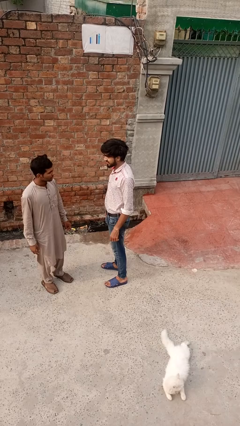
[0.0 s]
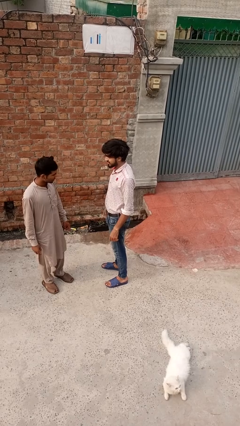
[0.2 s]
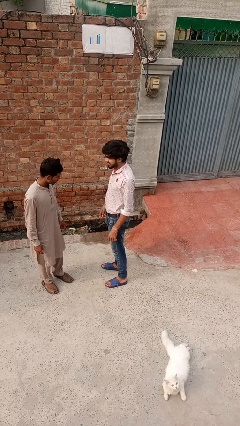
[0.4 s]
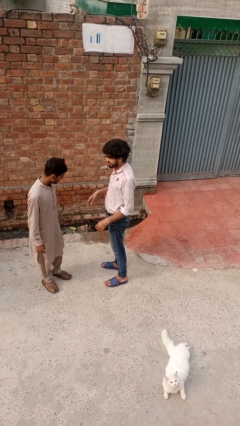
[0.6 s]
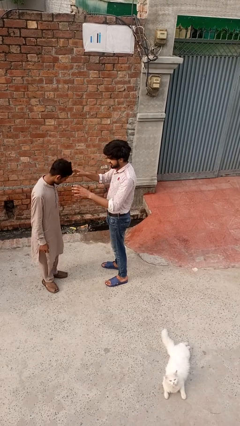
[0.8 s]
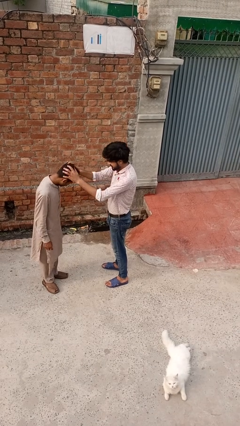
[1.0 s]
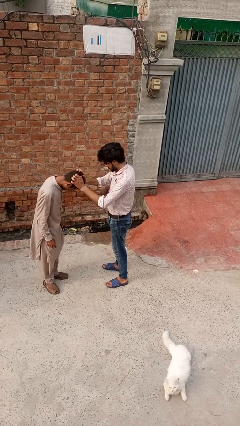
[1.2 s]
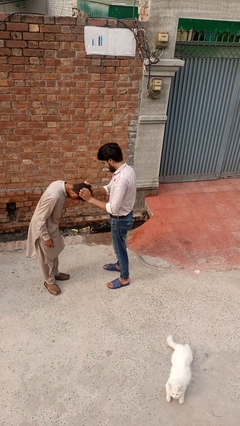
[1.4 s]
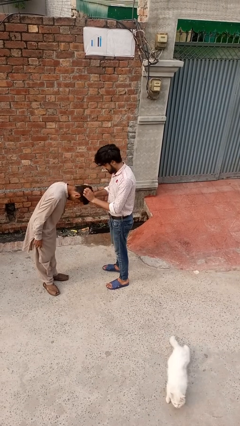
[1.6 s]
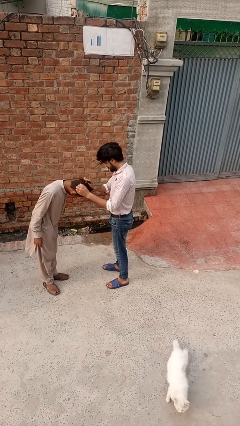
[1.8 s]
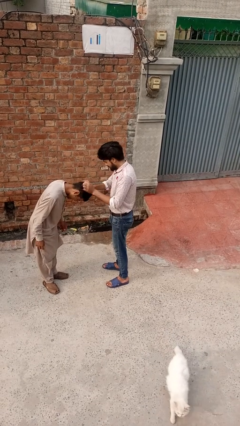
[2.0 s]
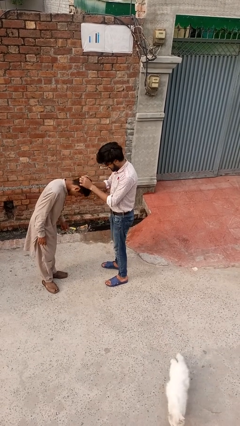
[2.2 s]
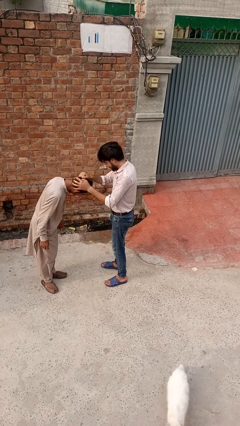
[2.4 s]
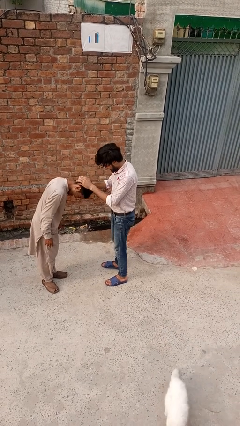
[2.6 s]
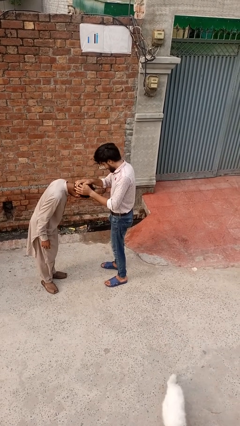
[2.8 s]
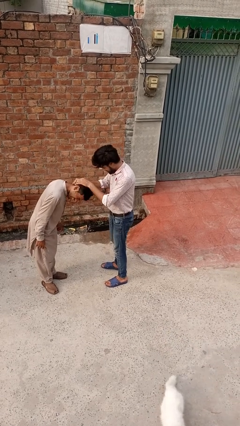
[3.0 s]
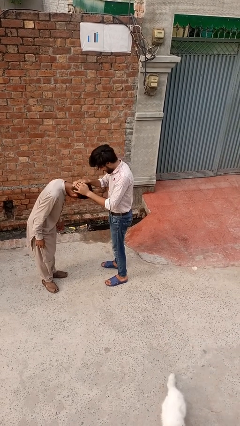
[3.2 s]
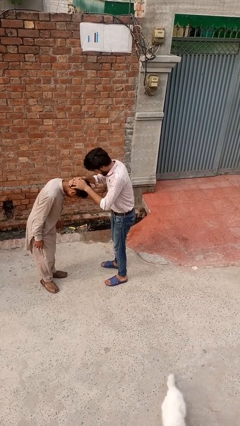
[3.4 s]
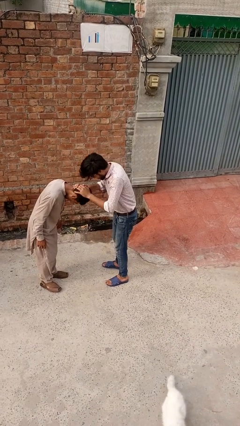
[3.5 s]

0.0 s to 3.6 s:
person grabs person by hair

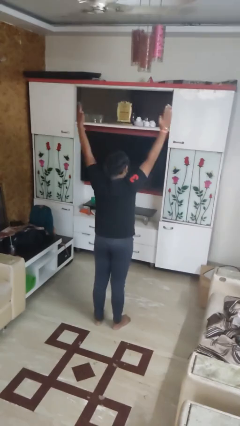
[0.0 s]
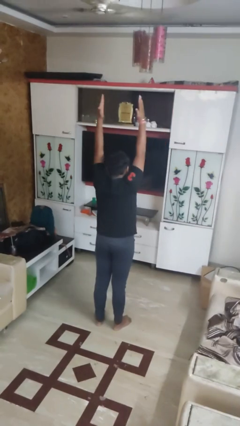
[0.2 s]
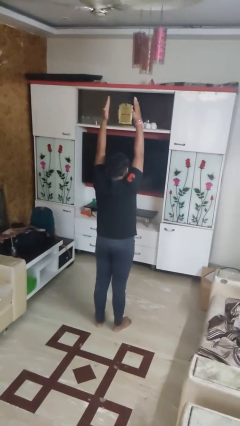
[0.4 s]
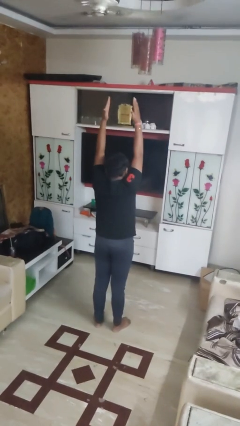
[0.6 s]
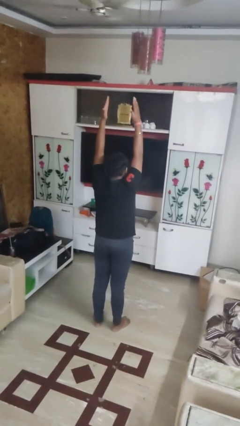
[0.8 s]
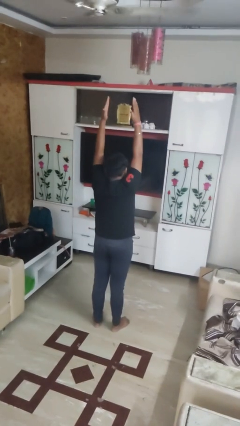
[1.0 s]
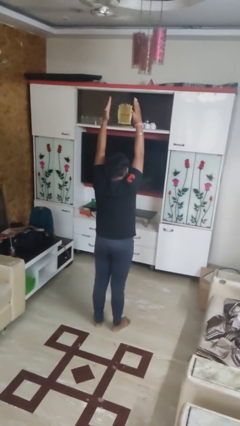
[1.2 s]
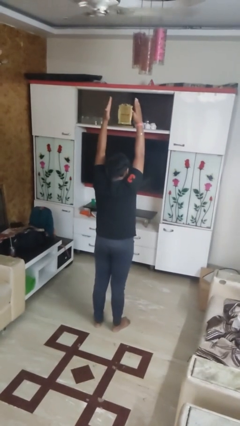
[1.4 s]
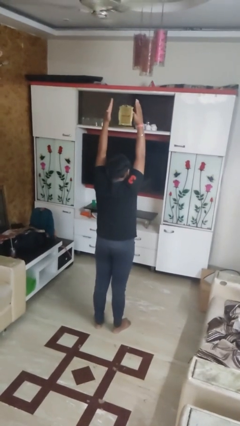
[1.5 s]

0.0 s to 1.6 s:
person stretches arms over head

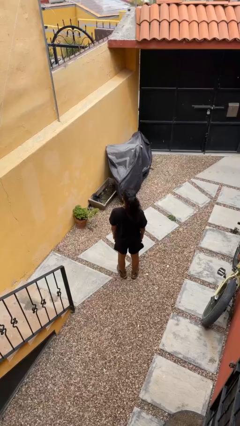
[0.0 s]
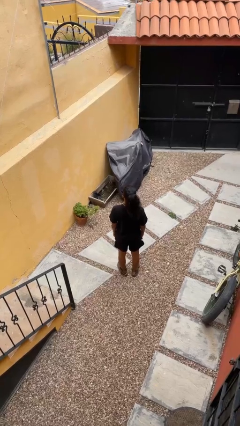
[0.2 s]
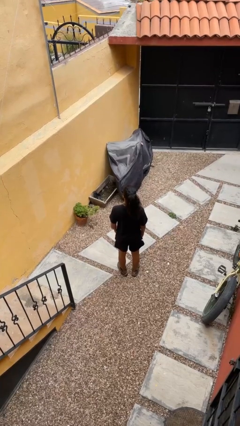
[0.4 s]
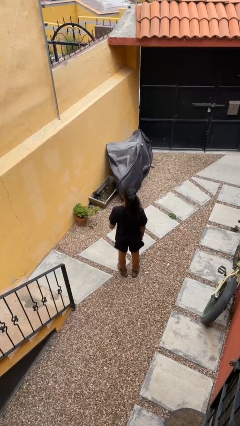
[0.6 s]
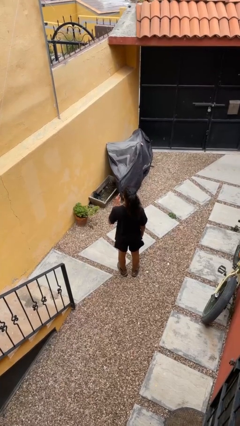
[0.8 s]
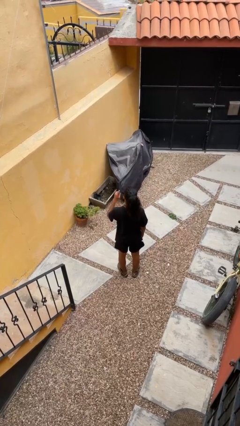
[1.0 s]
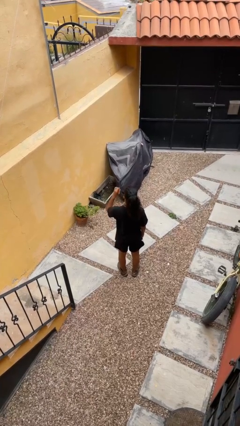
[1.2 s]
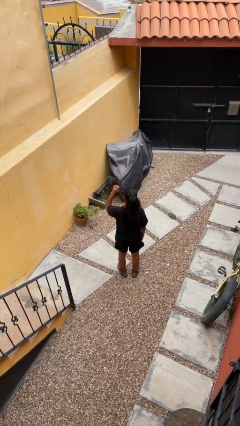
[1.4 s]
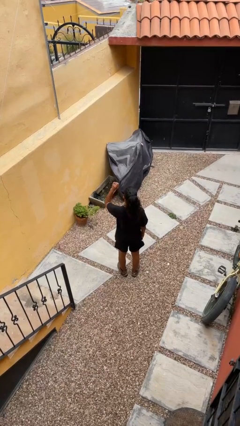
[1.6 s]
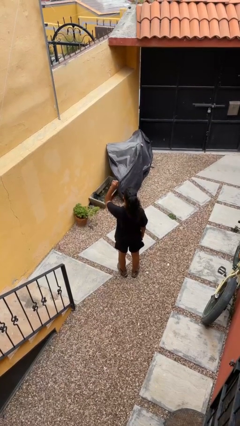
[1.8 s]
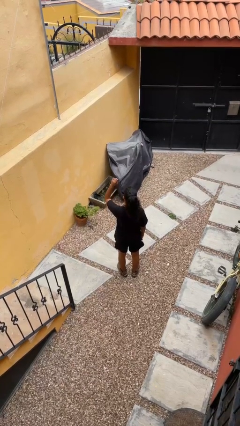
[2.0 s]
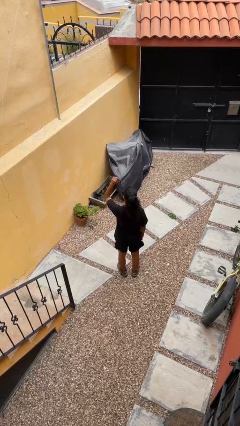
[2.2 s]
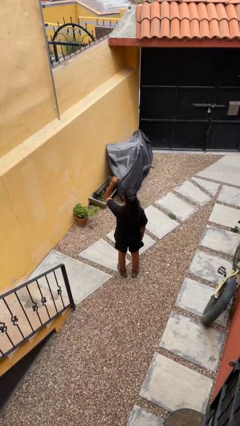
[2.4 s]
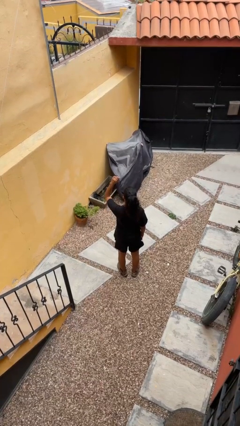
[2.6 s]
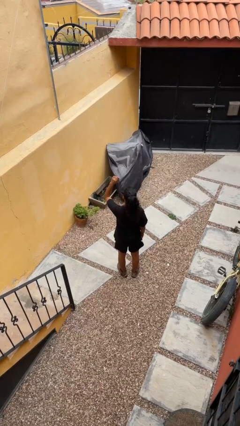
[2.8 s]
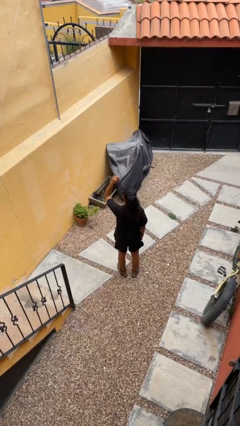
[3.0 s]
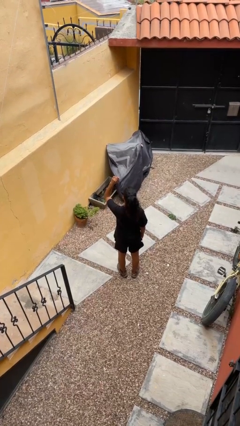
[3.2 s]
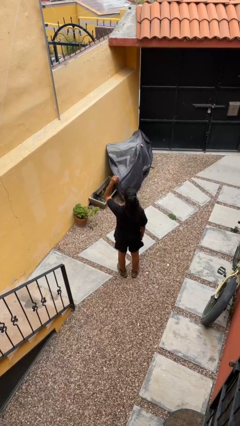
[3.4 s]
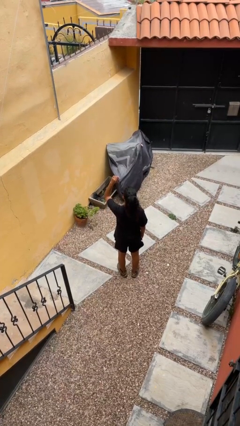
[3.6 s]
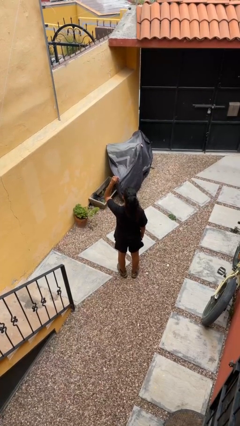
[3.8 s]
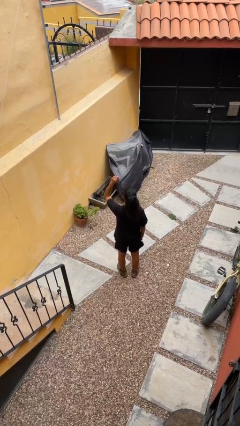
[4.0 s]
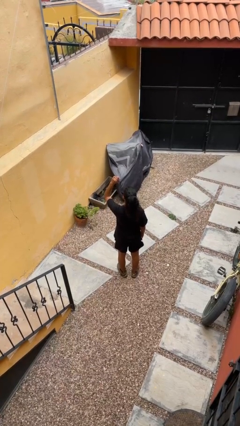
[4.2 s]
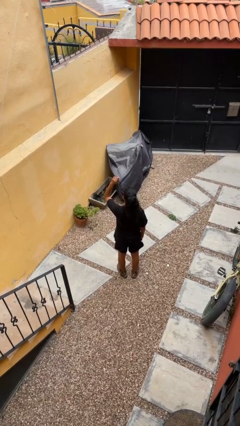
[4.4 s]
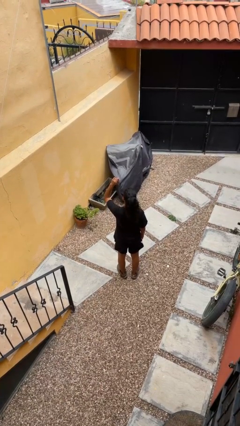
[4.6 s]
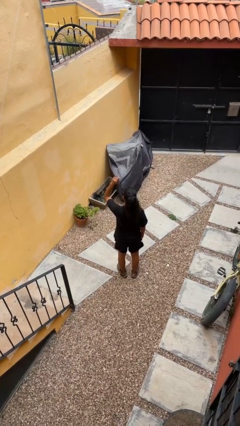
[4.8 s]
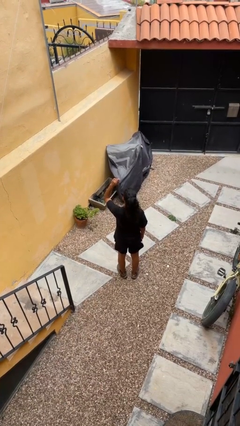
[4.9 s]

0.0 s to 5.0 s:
person gestures raise hand

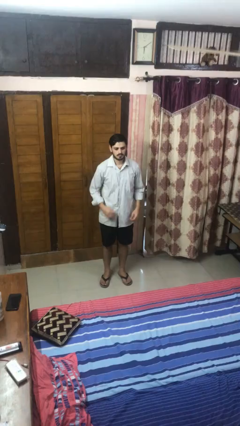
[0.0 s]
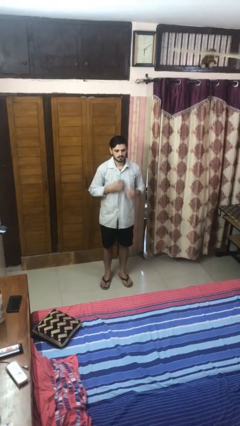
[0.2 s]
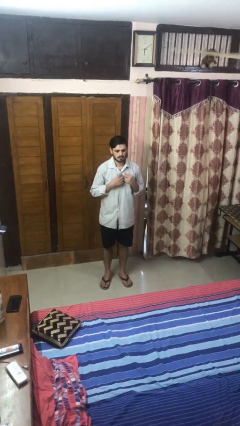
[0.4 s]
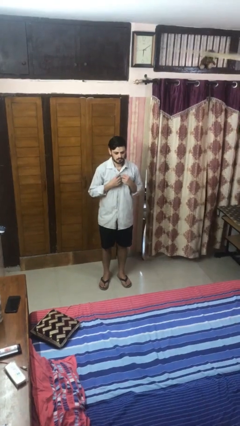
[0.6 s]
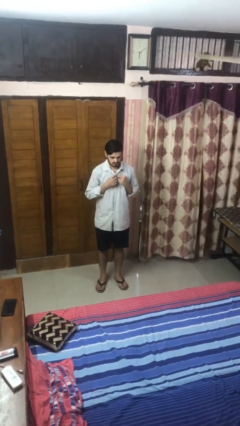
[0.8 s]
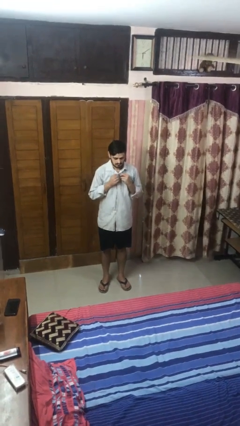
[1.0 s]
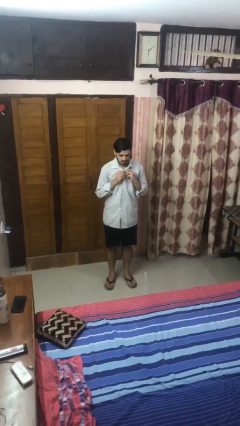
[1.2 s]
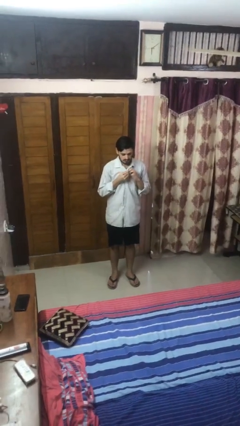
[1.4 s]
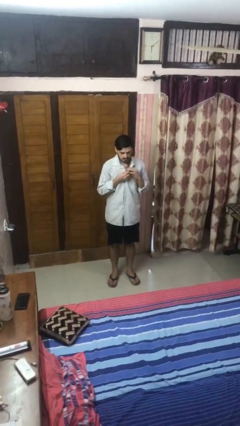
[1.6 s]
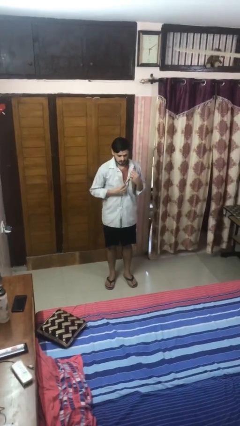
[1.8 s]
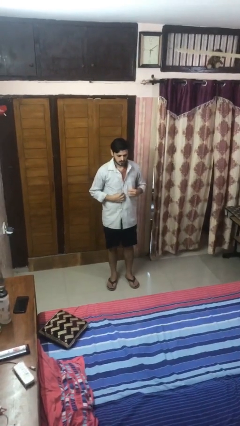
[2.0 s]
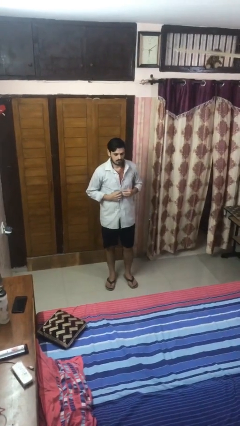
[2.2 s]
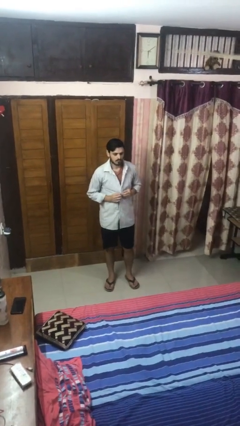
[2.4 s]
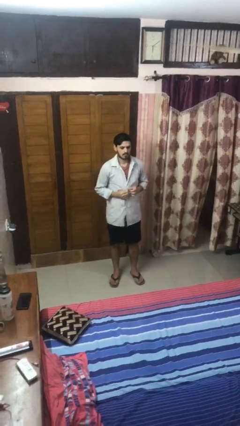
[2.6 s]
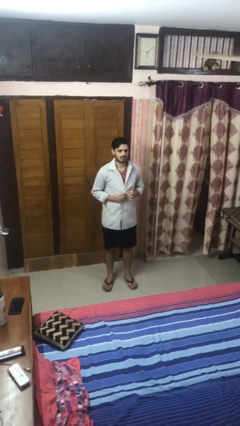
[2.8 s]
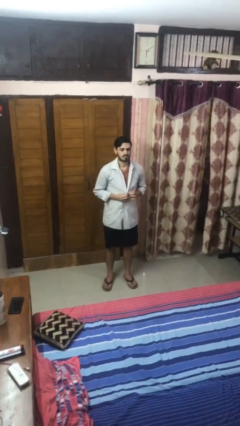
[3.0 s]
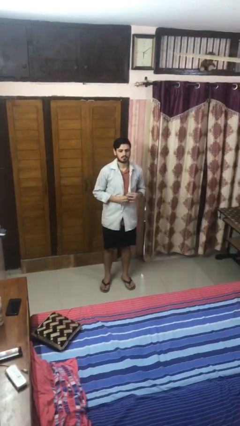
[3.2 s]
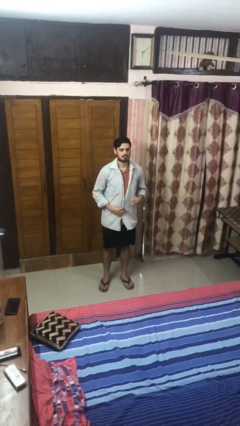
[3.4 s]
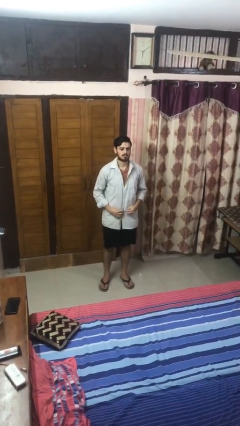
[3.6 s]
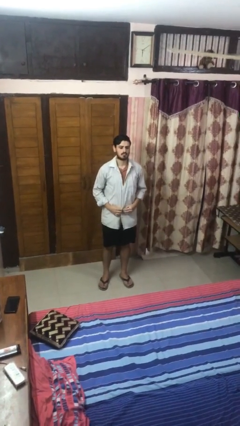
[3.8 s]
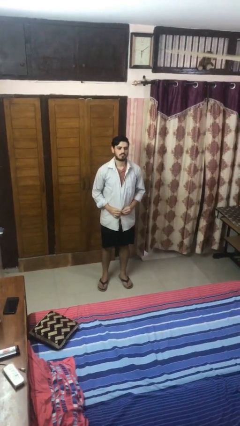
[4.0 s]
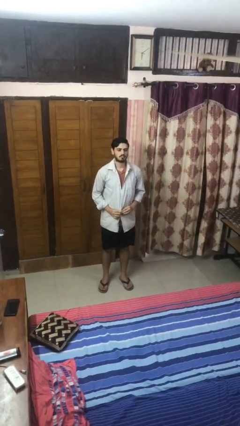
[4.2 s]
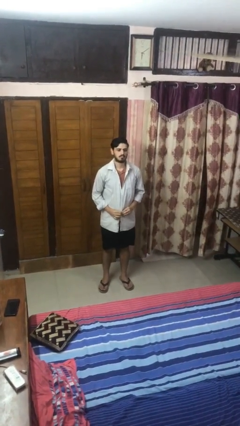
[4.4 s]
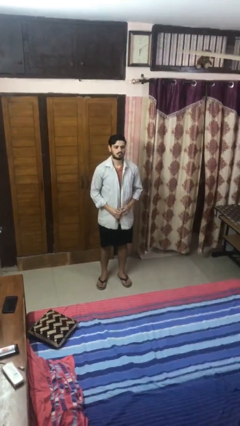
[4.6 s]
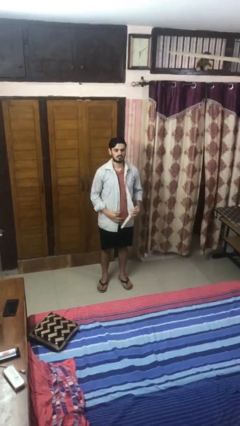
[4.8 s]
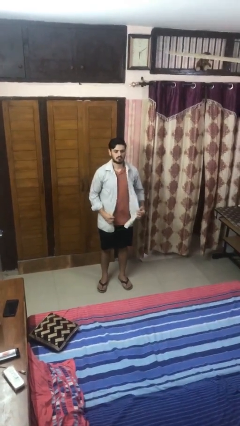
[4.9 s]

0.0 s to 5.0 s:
person unbuttons shirt

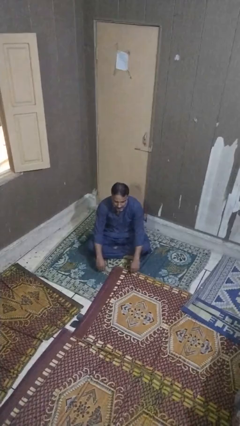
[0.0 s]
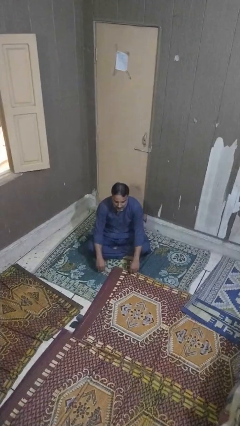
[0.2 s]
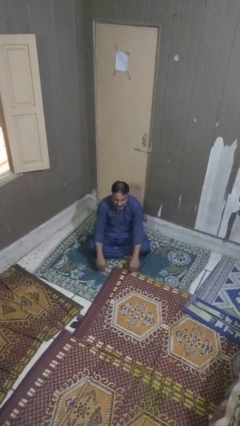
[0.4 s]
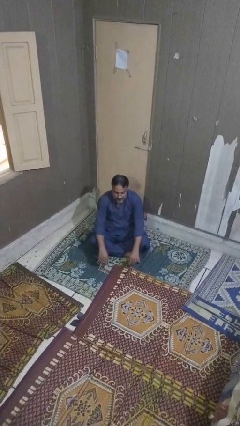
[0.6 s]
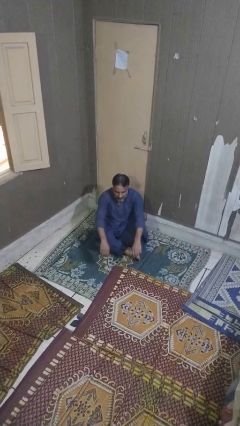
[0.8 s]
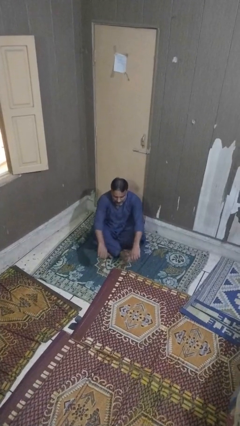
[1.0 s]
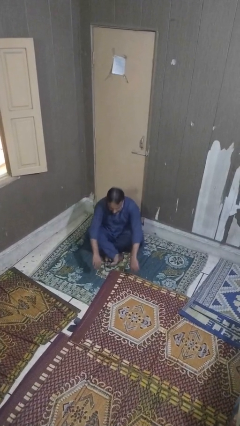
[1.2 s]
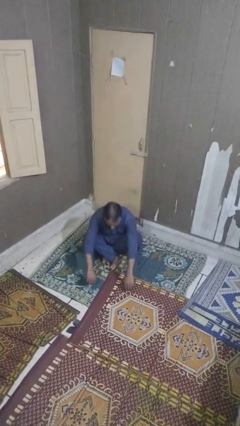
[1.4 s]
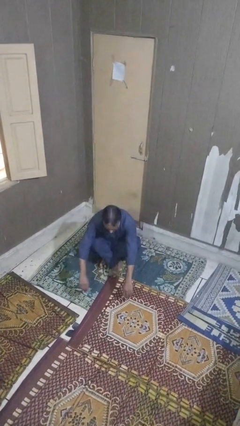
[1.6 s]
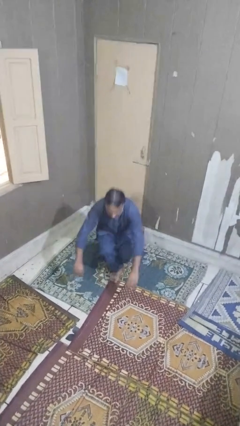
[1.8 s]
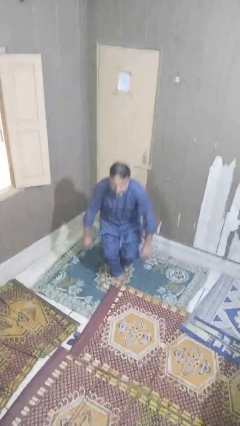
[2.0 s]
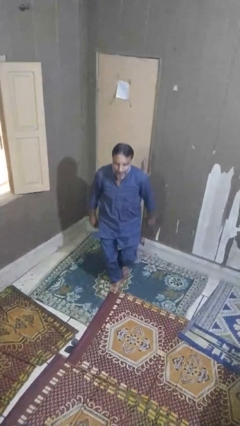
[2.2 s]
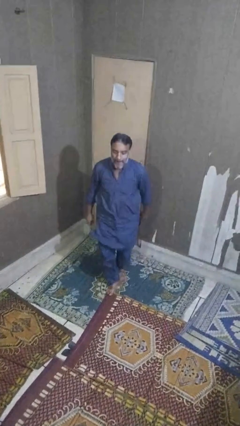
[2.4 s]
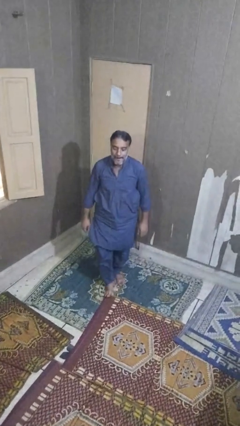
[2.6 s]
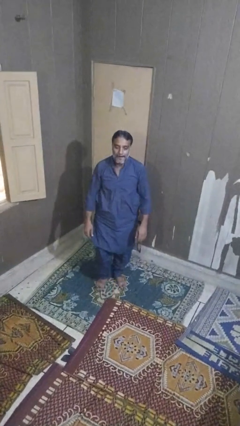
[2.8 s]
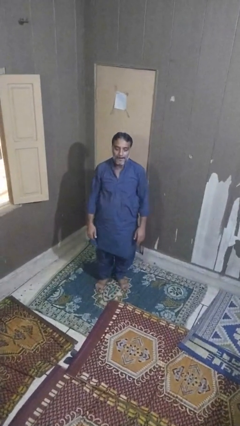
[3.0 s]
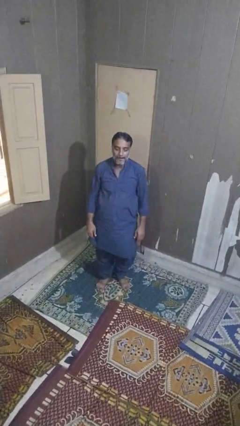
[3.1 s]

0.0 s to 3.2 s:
person stands up from floor
